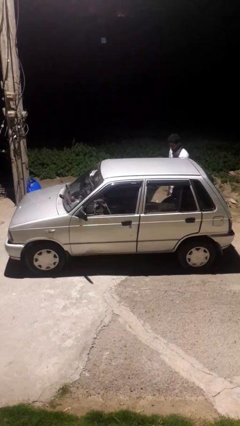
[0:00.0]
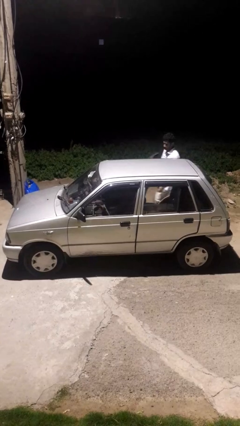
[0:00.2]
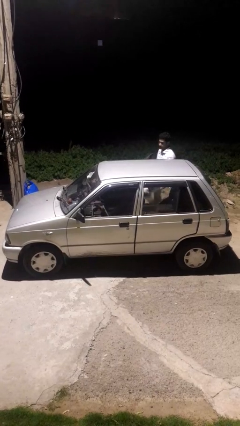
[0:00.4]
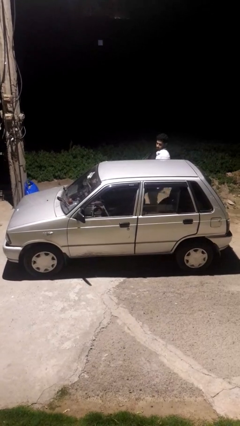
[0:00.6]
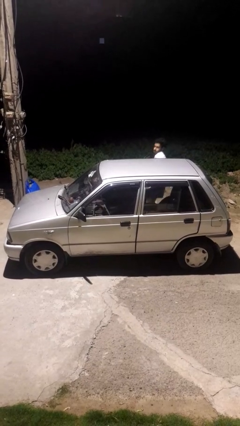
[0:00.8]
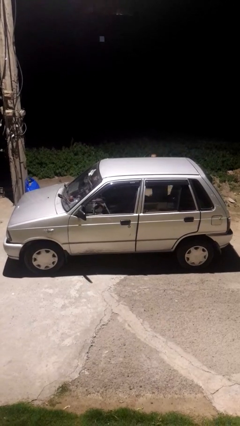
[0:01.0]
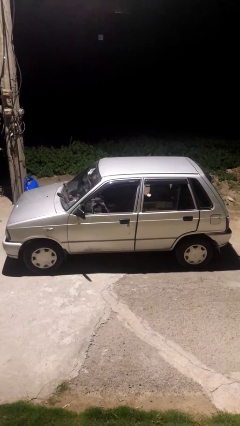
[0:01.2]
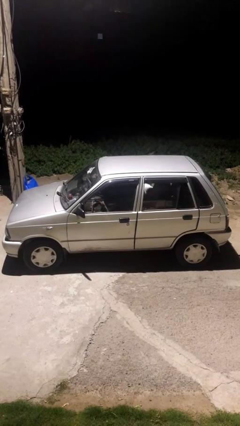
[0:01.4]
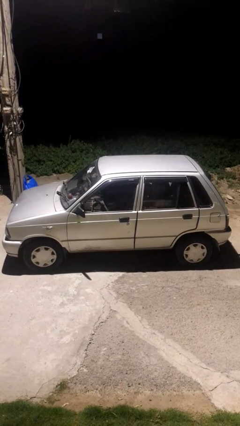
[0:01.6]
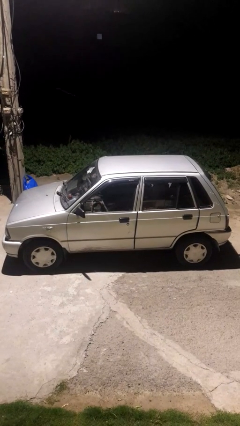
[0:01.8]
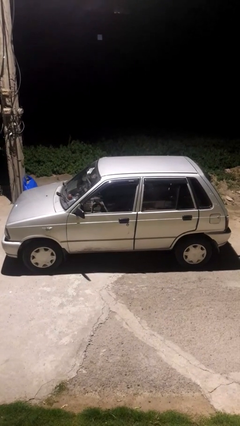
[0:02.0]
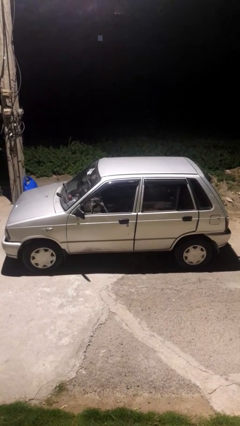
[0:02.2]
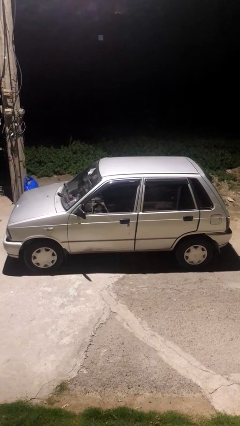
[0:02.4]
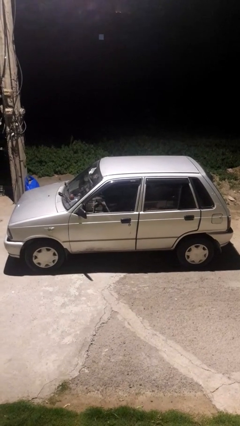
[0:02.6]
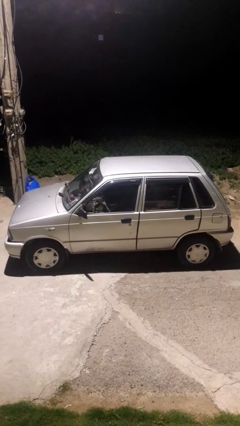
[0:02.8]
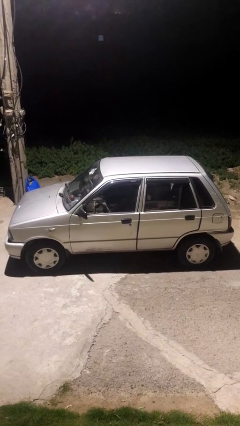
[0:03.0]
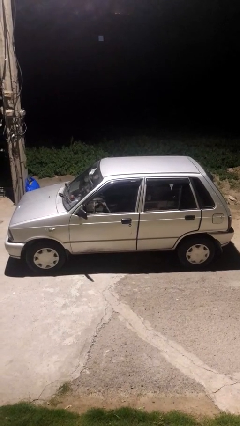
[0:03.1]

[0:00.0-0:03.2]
car picks up person

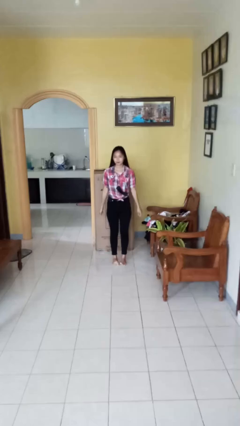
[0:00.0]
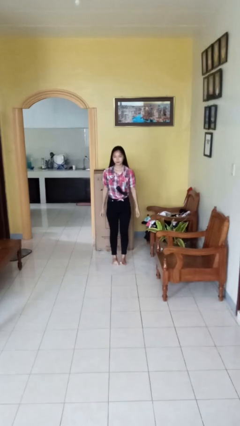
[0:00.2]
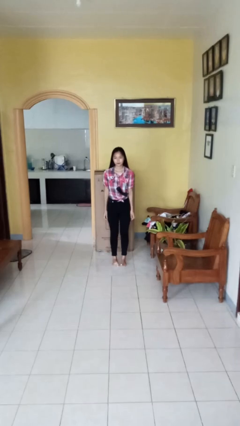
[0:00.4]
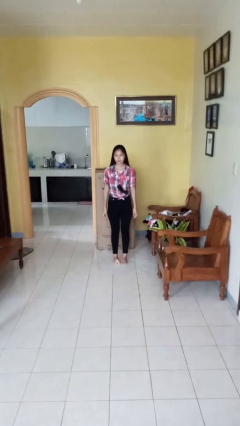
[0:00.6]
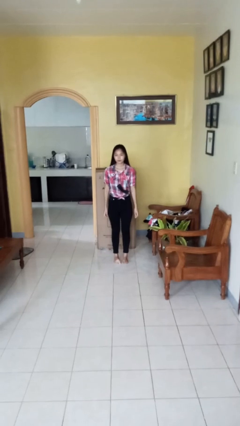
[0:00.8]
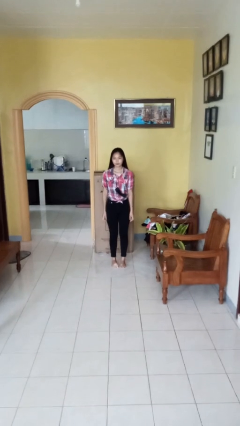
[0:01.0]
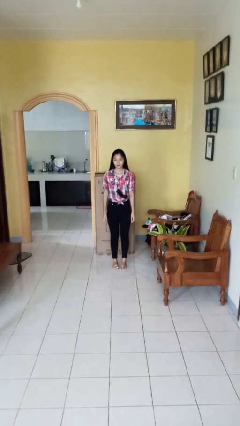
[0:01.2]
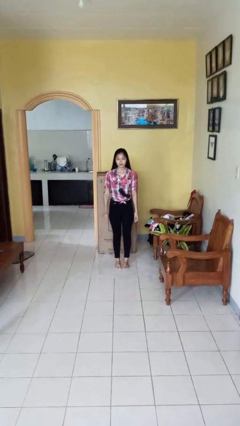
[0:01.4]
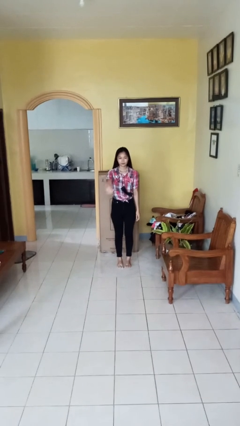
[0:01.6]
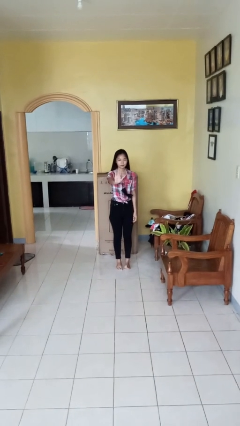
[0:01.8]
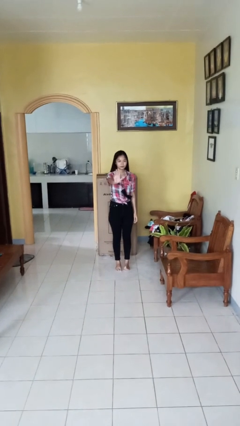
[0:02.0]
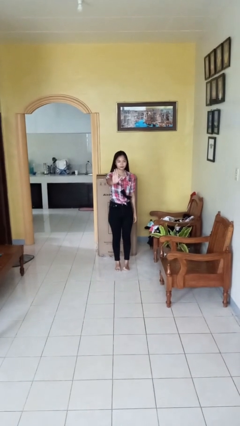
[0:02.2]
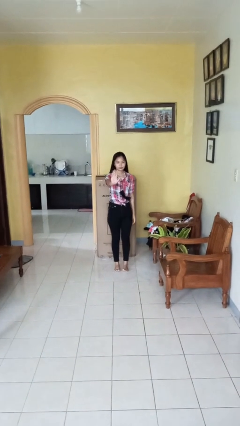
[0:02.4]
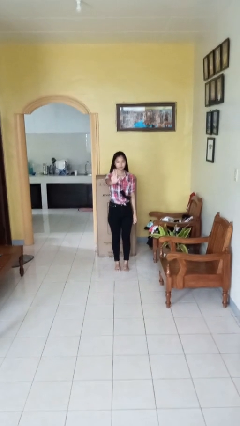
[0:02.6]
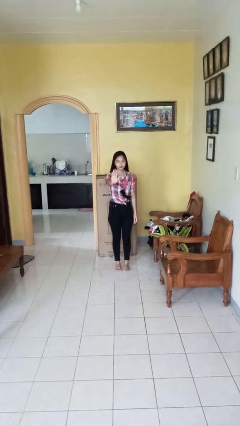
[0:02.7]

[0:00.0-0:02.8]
person gestures stop

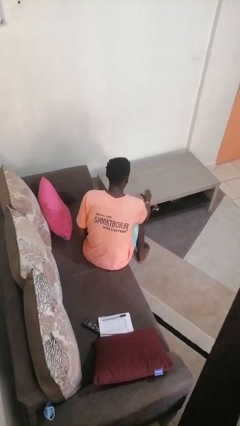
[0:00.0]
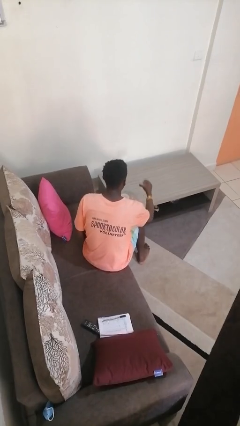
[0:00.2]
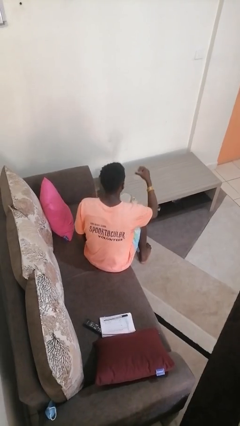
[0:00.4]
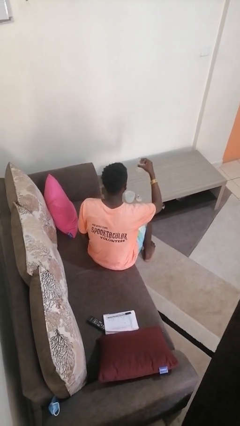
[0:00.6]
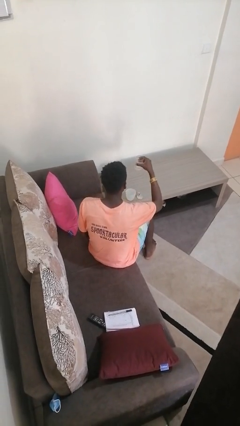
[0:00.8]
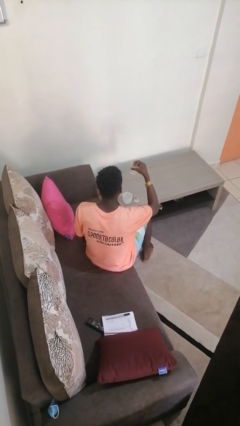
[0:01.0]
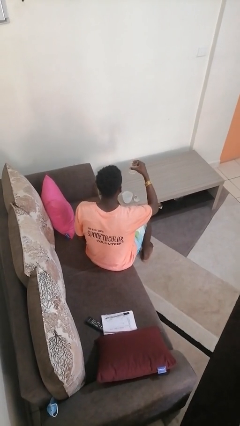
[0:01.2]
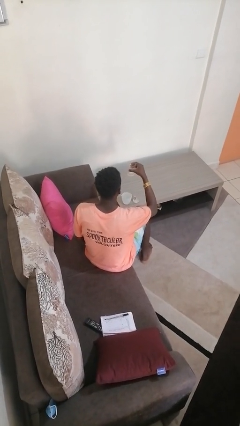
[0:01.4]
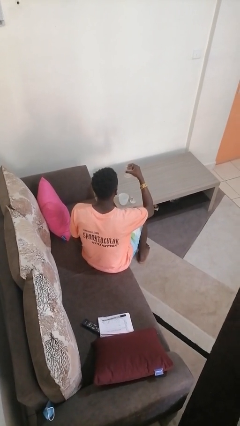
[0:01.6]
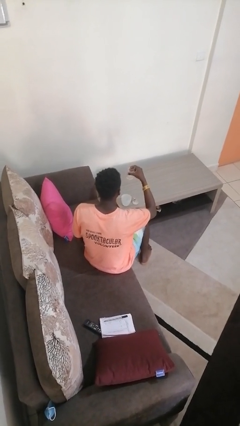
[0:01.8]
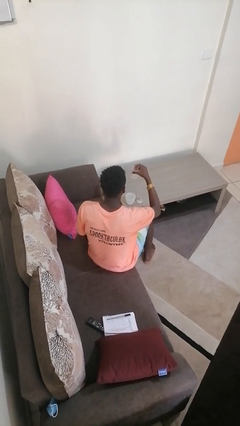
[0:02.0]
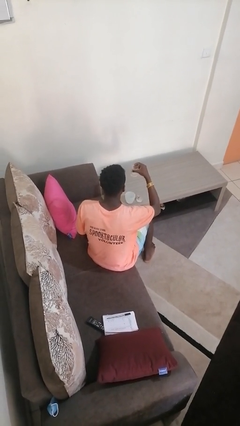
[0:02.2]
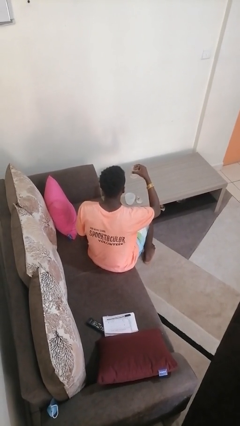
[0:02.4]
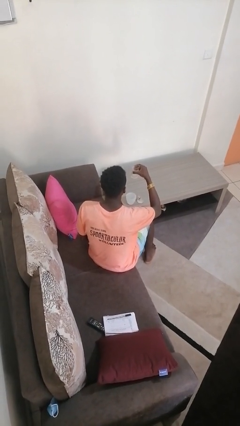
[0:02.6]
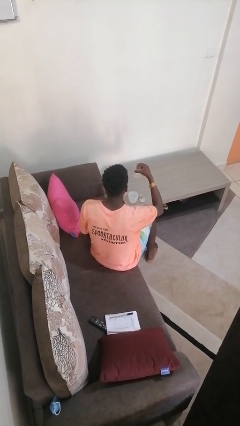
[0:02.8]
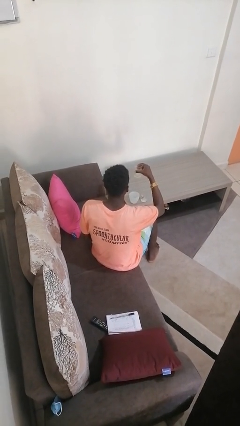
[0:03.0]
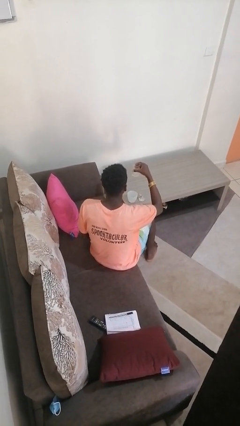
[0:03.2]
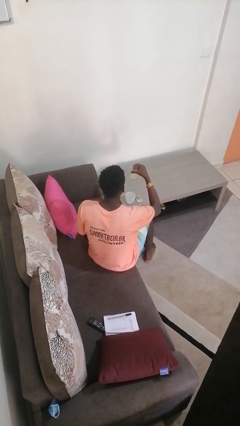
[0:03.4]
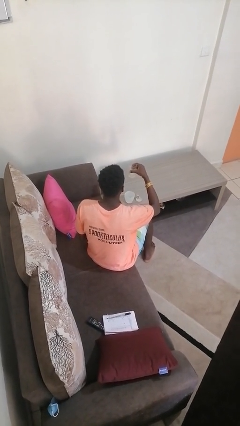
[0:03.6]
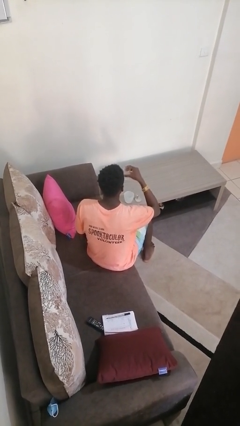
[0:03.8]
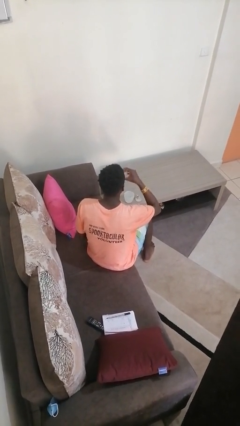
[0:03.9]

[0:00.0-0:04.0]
person picks up object from table

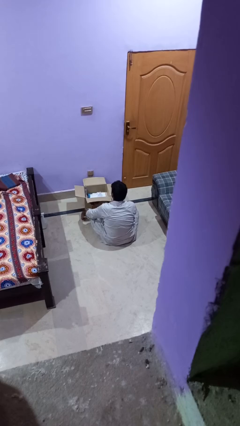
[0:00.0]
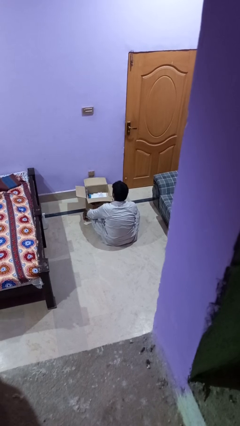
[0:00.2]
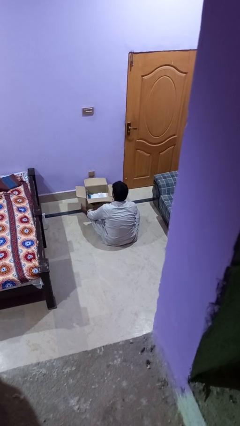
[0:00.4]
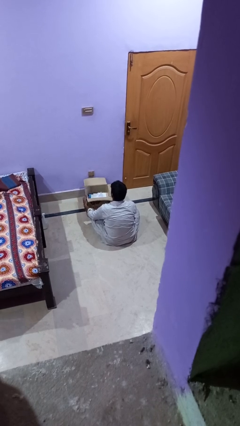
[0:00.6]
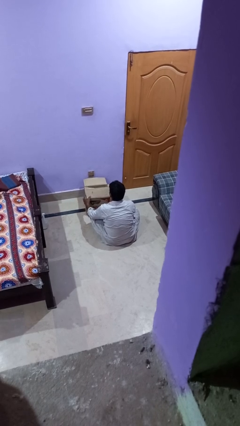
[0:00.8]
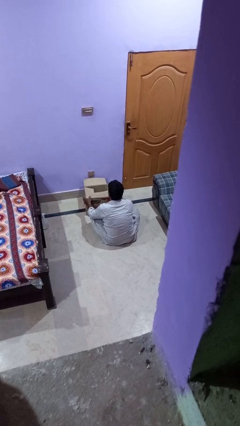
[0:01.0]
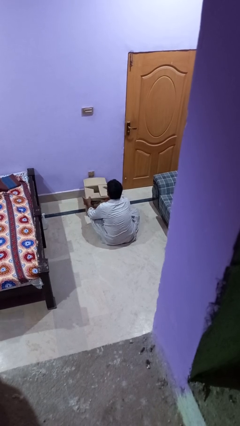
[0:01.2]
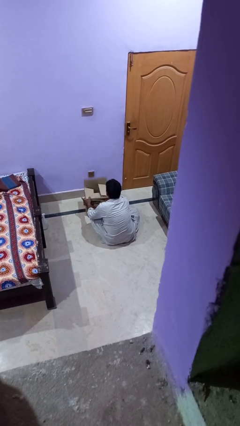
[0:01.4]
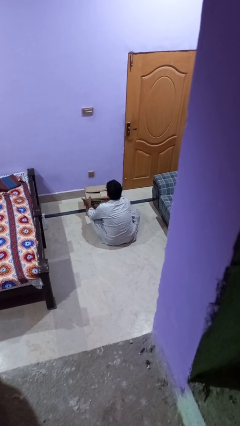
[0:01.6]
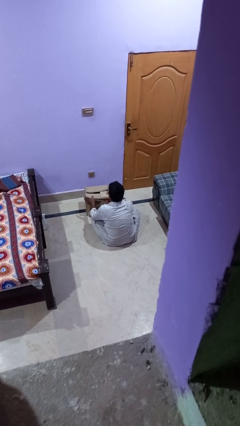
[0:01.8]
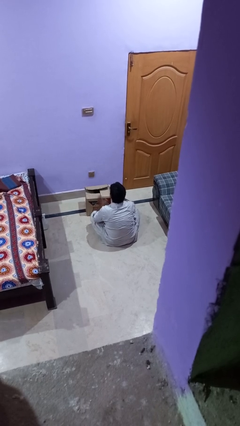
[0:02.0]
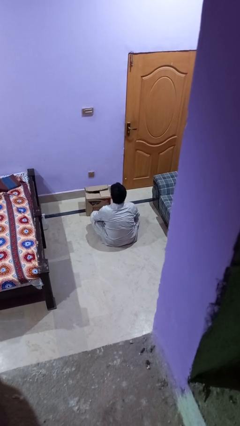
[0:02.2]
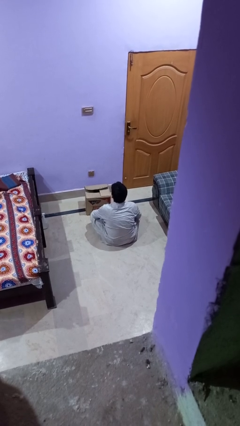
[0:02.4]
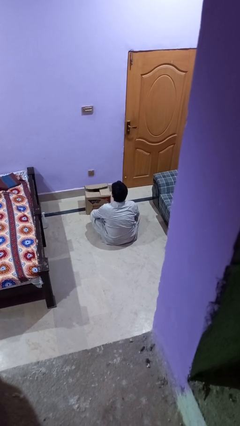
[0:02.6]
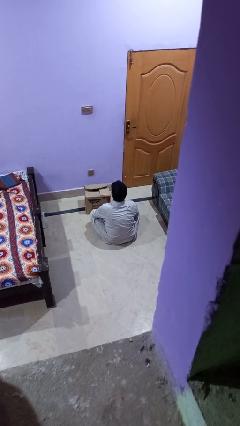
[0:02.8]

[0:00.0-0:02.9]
person closes box

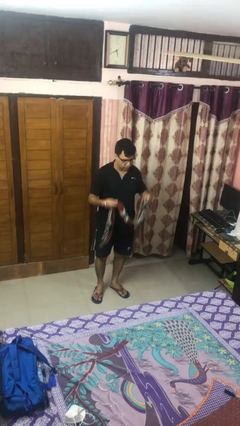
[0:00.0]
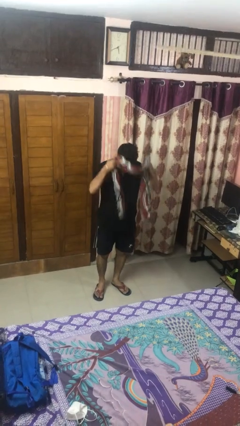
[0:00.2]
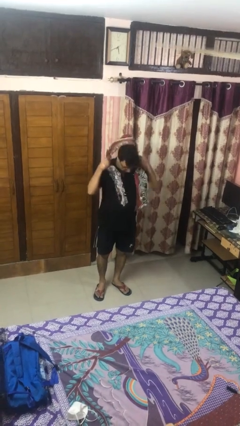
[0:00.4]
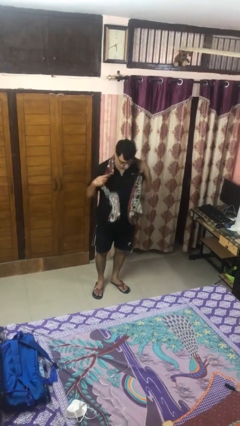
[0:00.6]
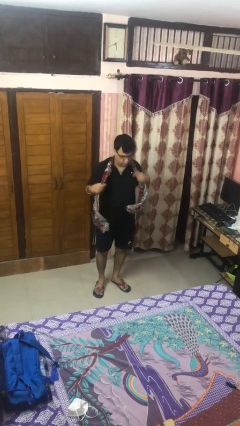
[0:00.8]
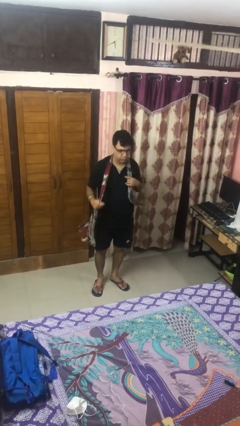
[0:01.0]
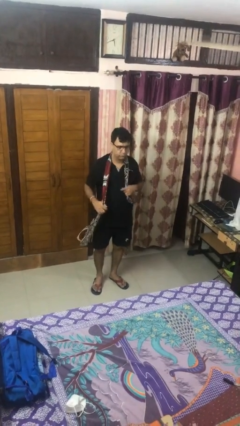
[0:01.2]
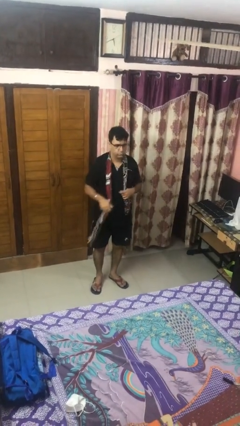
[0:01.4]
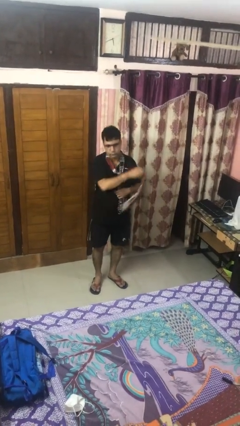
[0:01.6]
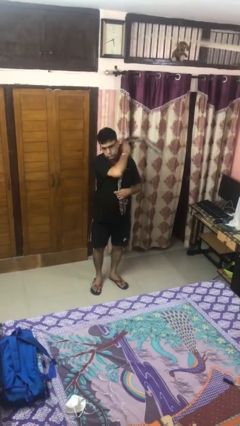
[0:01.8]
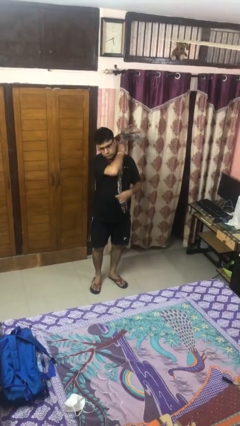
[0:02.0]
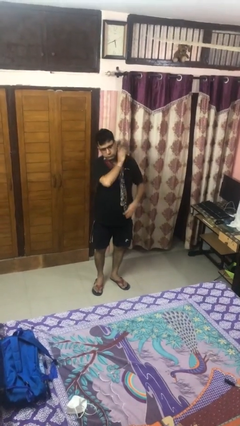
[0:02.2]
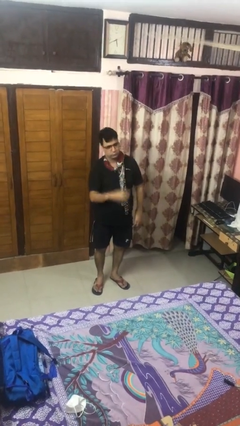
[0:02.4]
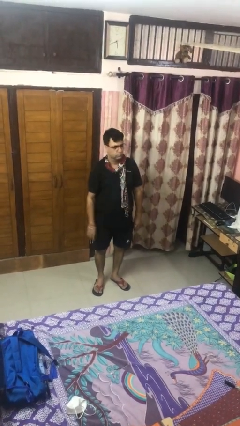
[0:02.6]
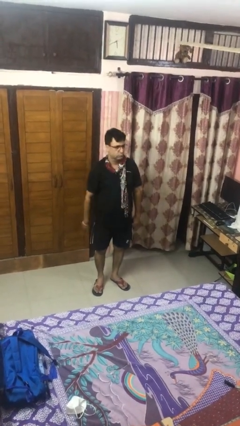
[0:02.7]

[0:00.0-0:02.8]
person puts on scarf

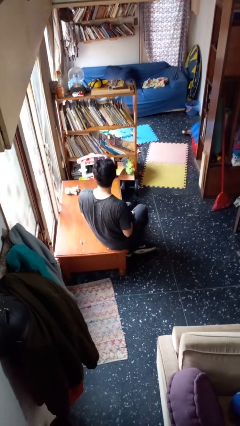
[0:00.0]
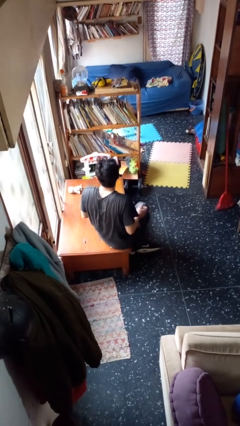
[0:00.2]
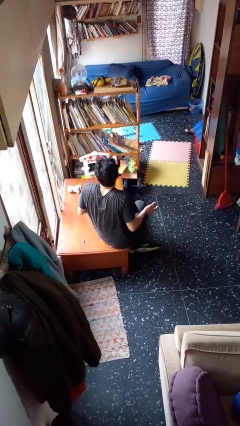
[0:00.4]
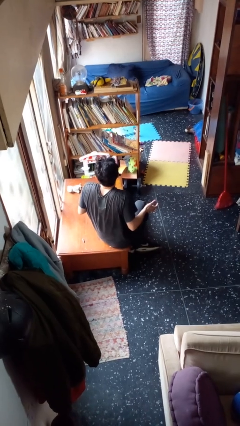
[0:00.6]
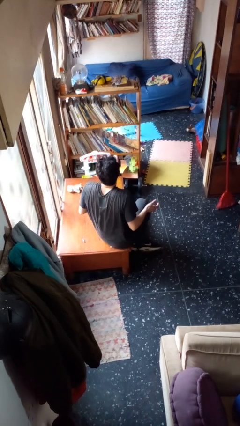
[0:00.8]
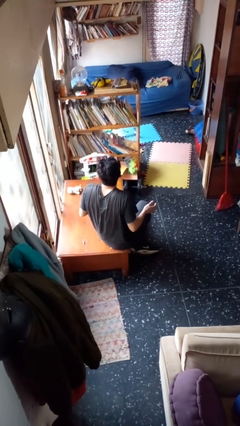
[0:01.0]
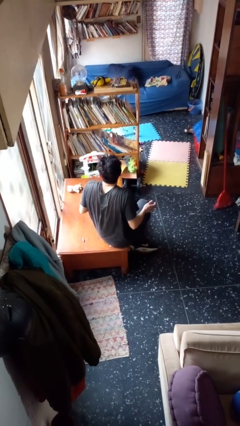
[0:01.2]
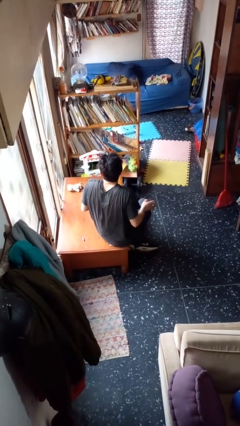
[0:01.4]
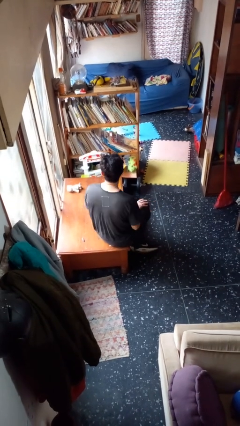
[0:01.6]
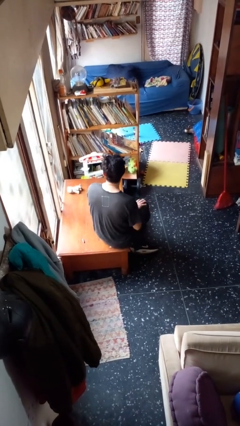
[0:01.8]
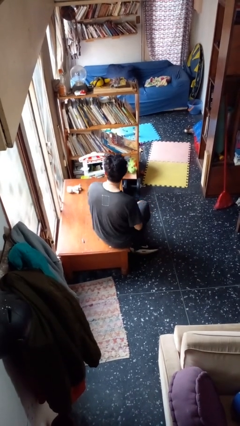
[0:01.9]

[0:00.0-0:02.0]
person shrugs
